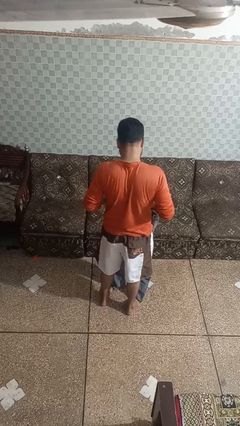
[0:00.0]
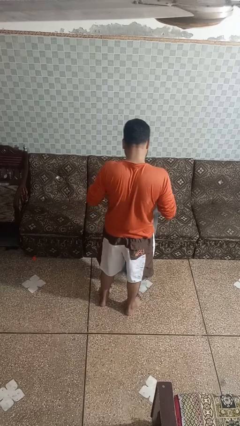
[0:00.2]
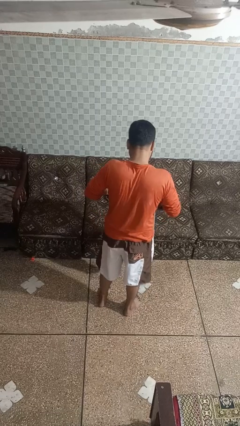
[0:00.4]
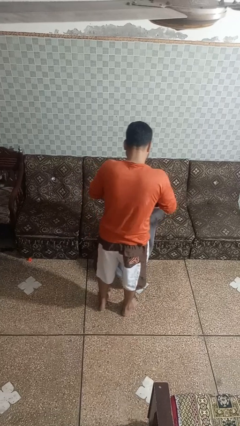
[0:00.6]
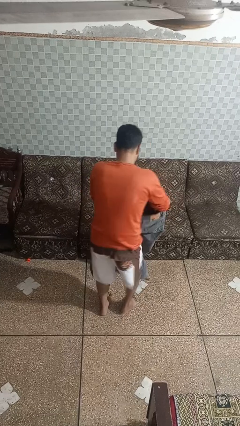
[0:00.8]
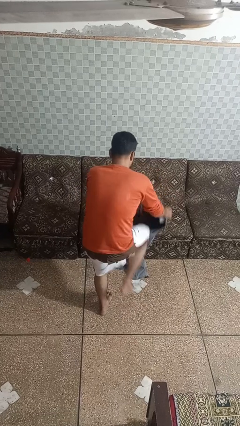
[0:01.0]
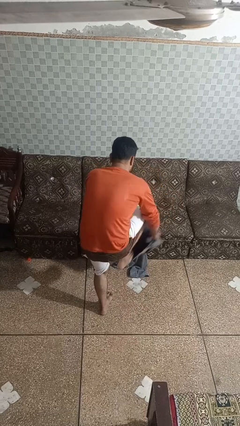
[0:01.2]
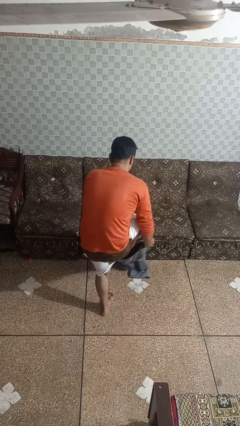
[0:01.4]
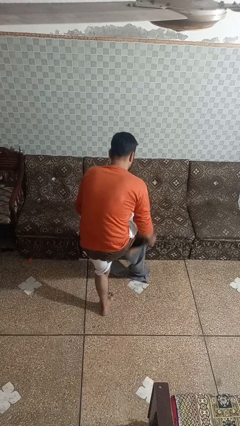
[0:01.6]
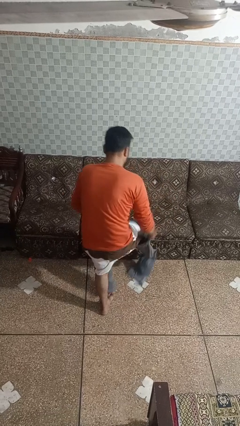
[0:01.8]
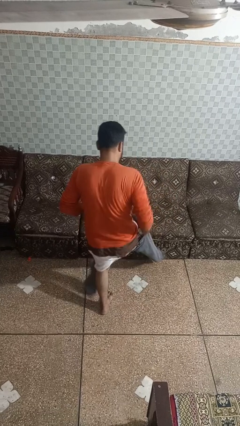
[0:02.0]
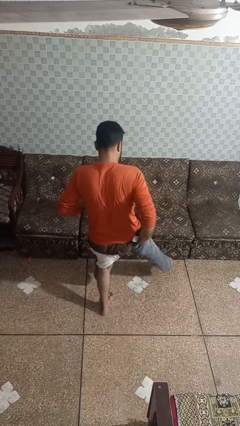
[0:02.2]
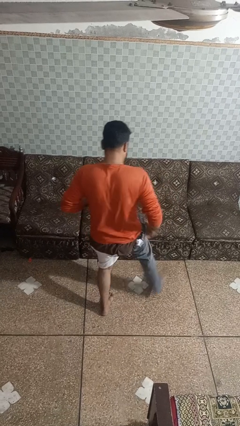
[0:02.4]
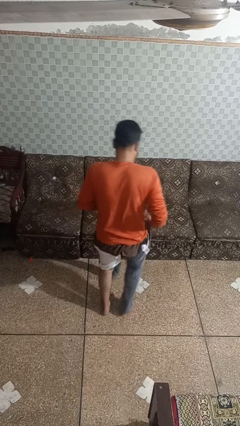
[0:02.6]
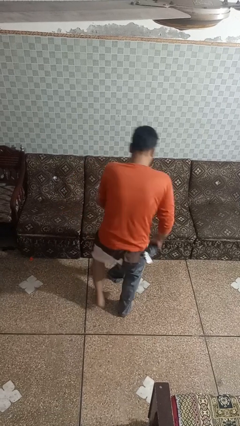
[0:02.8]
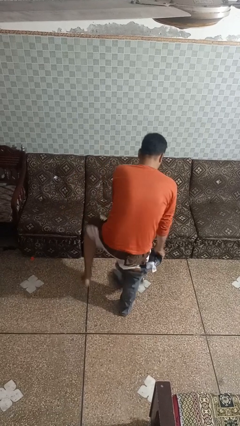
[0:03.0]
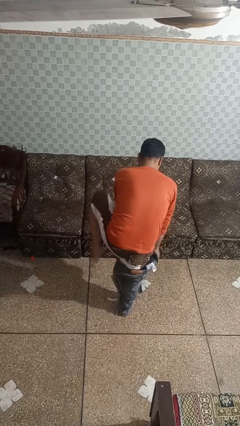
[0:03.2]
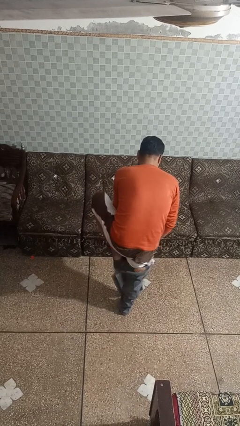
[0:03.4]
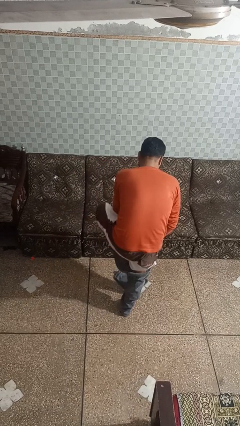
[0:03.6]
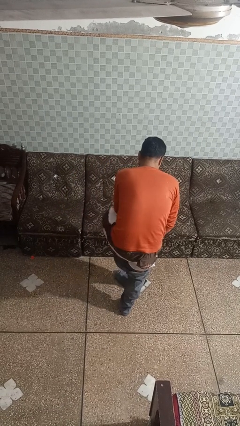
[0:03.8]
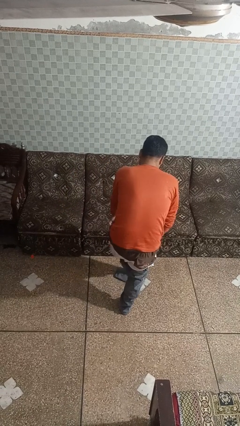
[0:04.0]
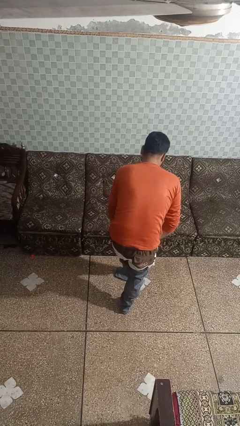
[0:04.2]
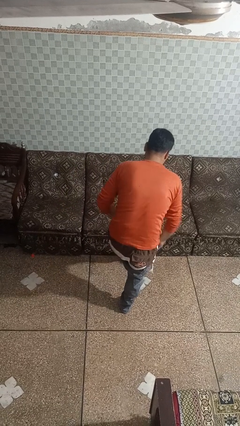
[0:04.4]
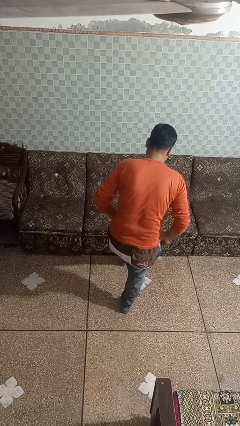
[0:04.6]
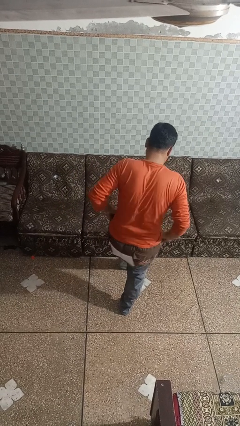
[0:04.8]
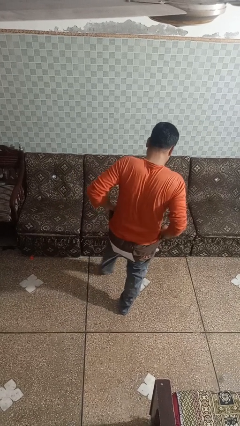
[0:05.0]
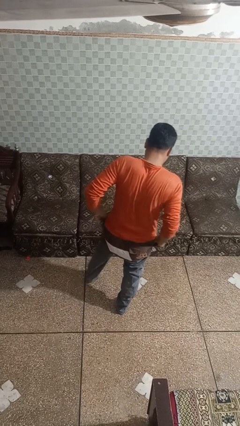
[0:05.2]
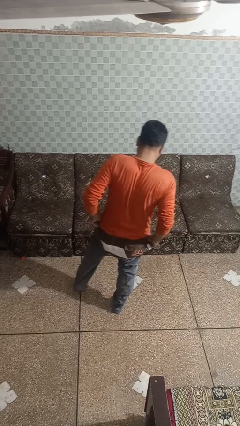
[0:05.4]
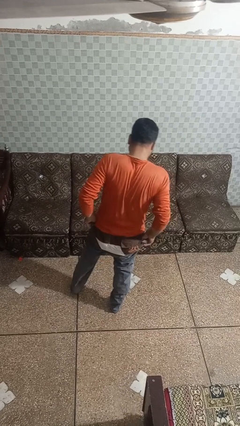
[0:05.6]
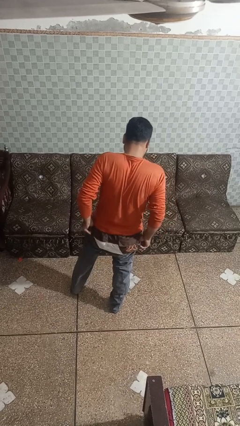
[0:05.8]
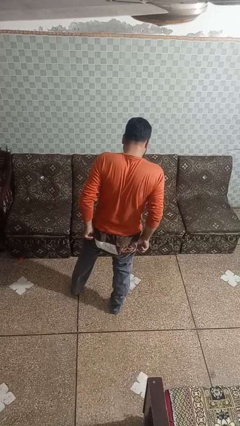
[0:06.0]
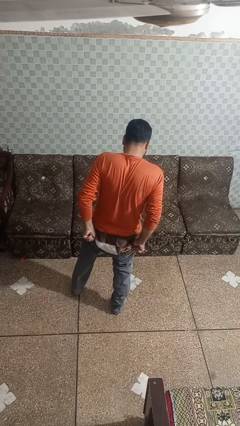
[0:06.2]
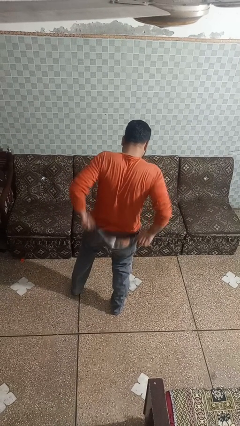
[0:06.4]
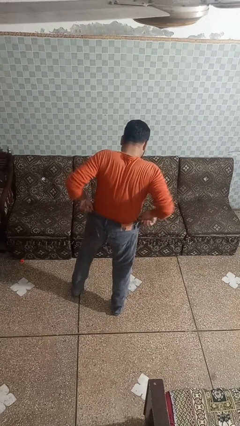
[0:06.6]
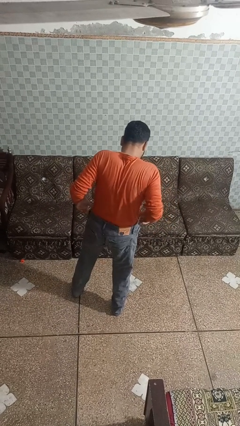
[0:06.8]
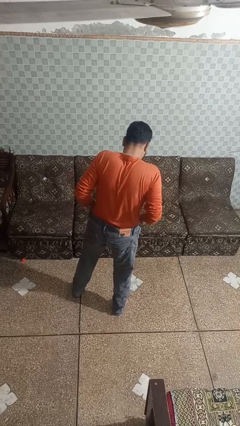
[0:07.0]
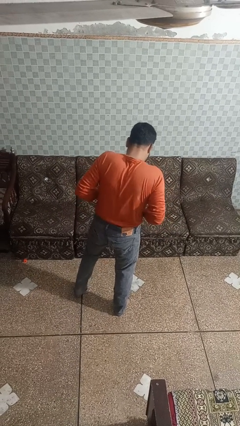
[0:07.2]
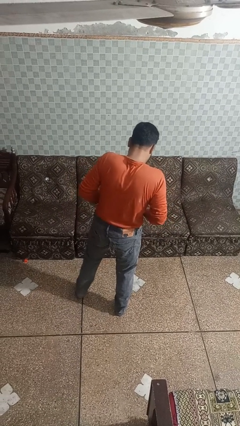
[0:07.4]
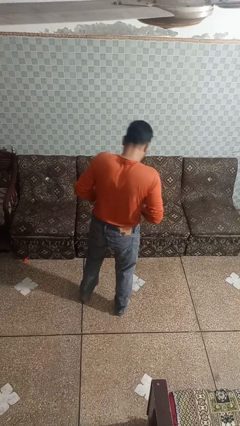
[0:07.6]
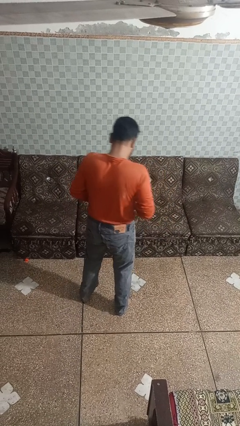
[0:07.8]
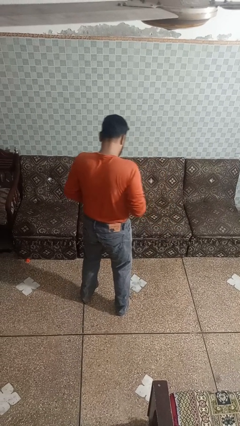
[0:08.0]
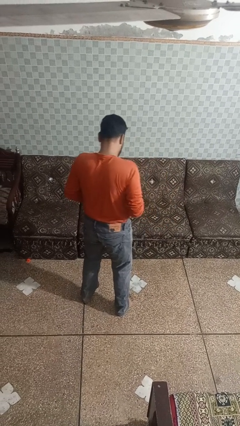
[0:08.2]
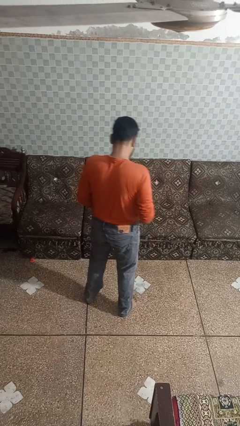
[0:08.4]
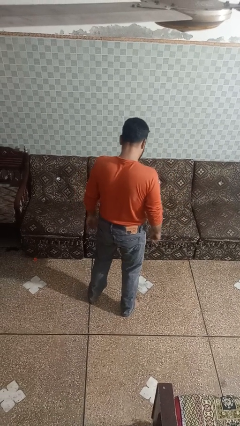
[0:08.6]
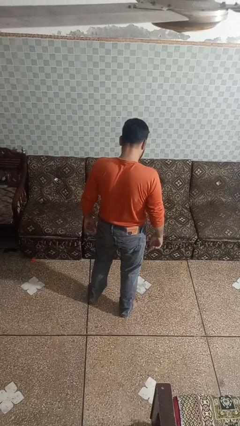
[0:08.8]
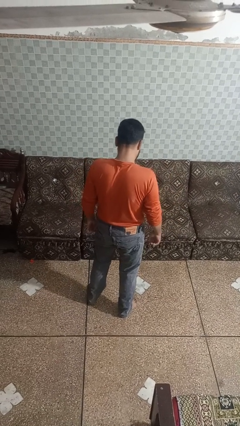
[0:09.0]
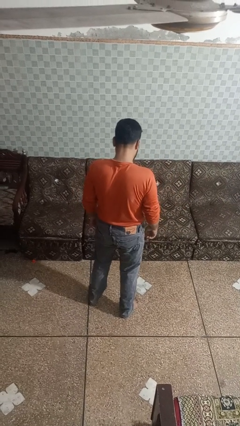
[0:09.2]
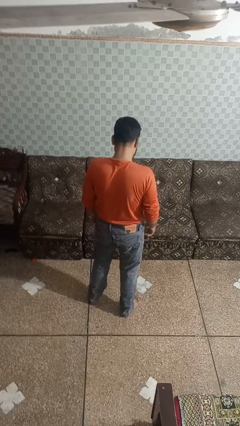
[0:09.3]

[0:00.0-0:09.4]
person puts on pants

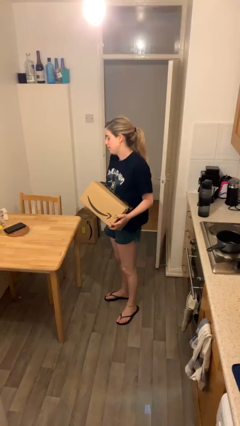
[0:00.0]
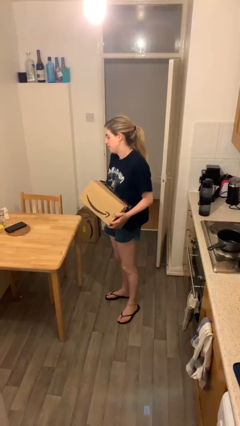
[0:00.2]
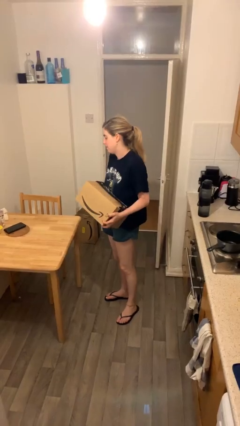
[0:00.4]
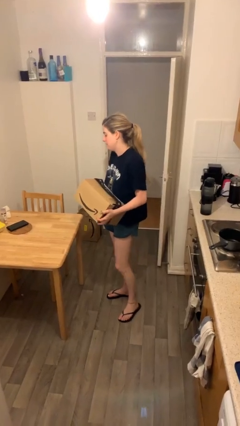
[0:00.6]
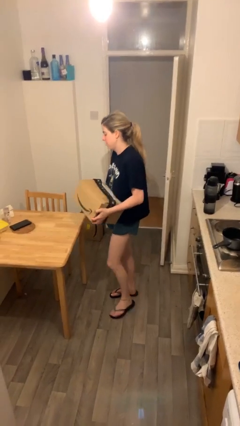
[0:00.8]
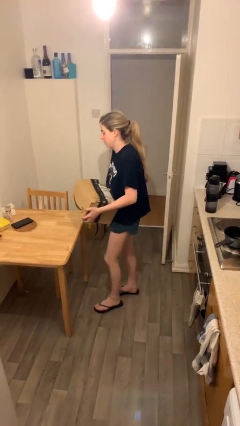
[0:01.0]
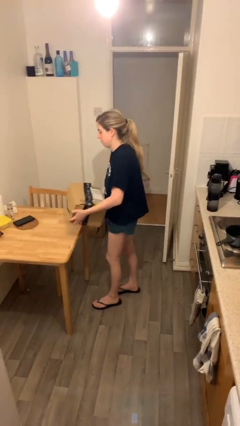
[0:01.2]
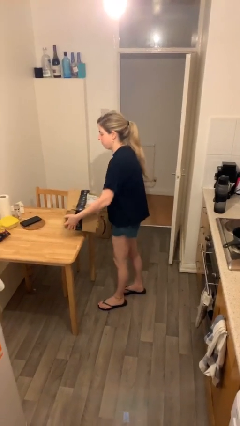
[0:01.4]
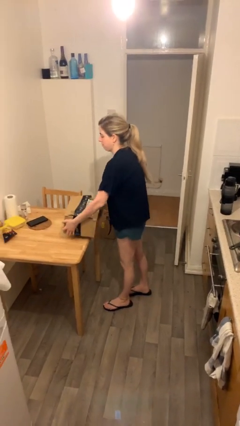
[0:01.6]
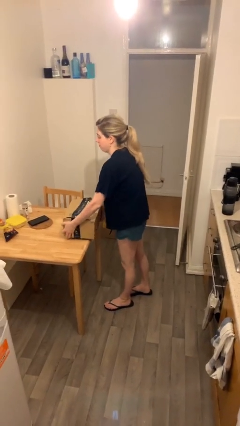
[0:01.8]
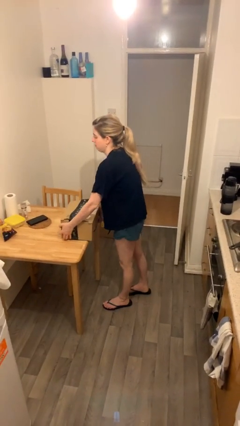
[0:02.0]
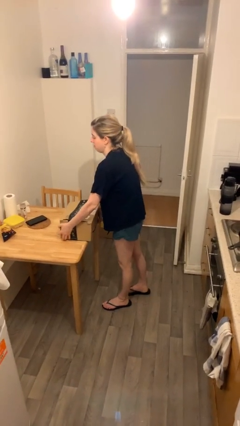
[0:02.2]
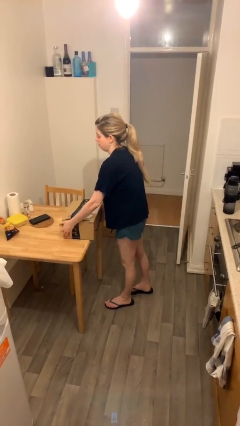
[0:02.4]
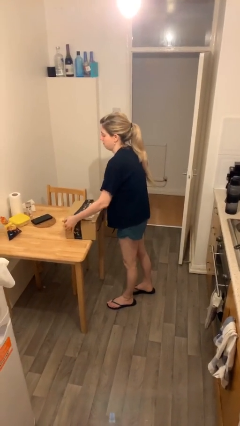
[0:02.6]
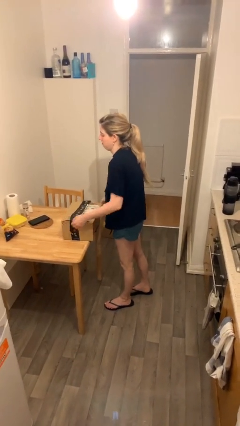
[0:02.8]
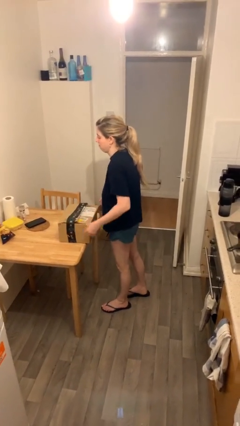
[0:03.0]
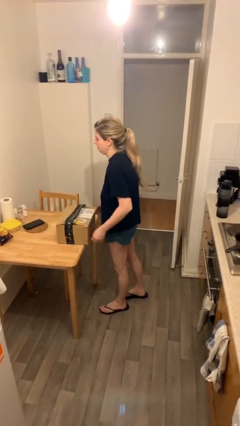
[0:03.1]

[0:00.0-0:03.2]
person puts down object on table

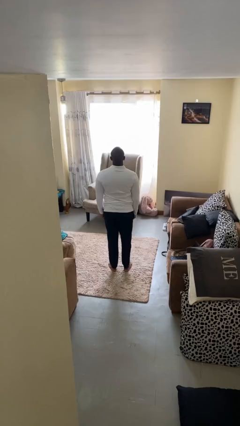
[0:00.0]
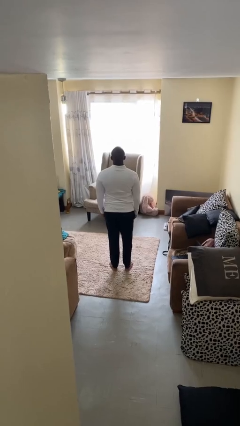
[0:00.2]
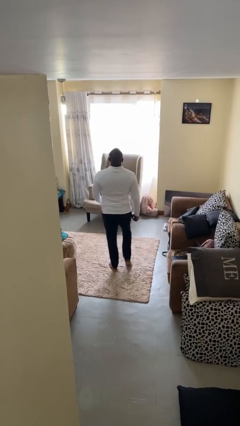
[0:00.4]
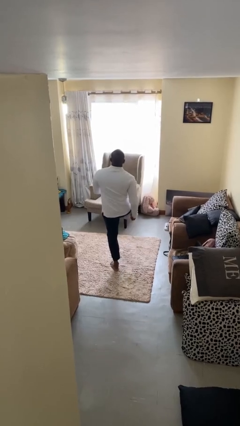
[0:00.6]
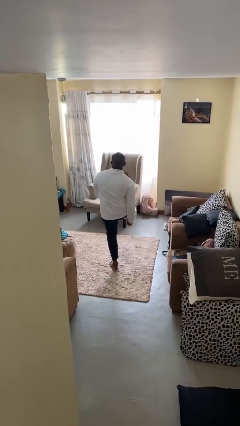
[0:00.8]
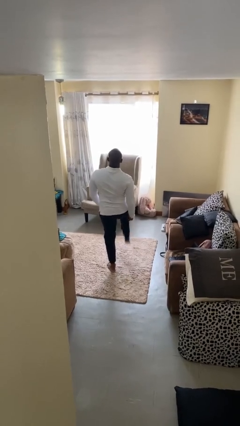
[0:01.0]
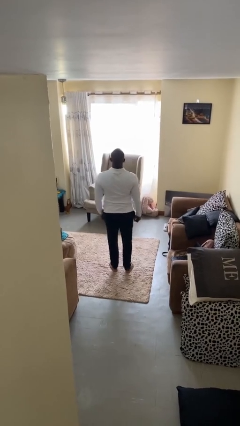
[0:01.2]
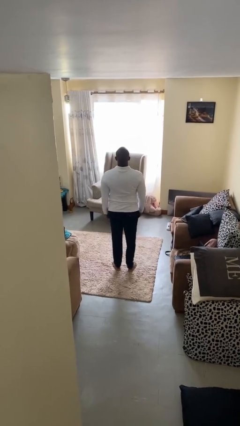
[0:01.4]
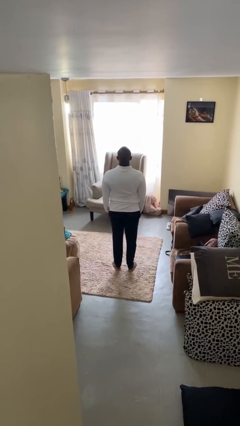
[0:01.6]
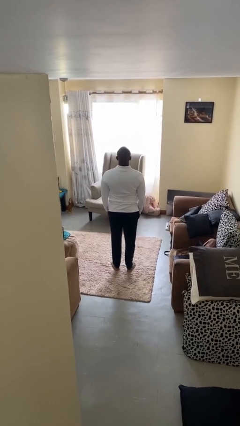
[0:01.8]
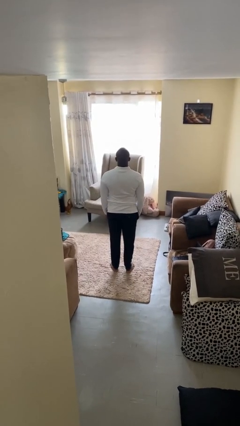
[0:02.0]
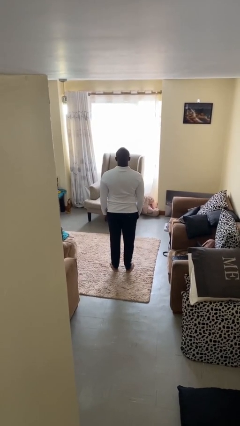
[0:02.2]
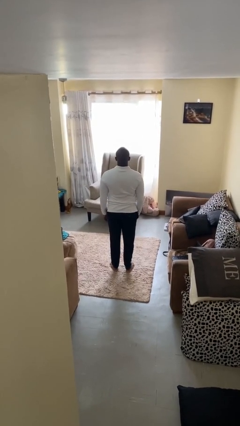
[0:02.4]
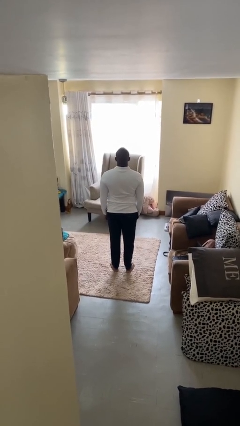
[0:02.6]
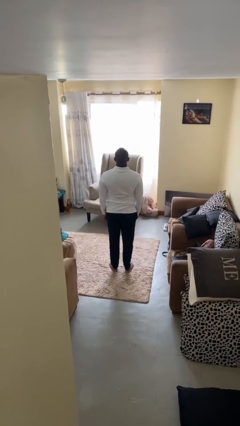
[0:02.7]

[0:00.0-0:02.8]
person karate kicks

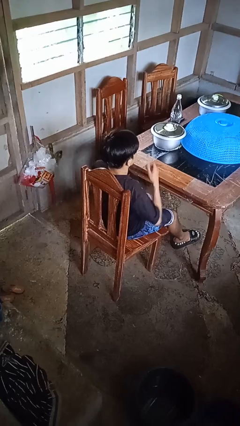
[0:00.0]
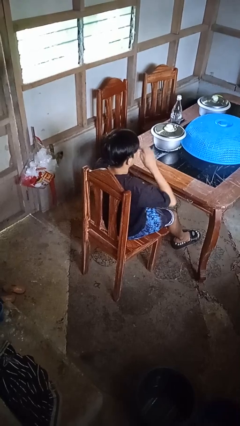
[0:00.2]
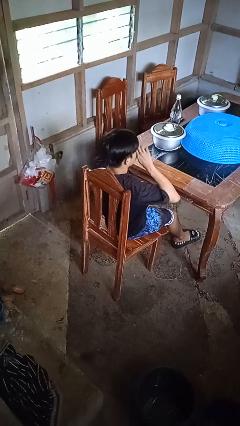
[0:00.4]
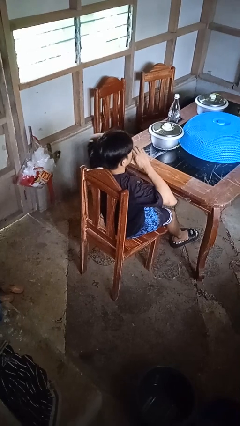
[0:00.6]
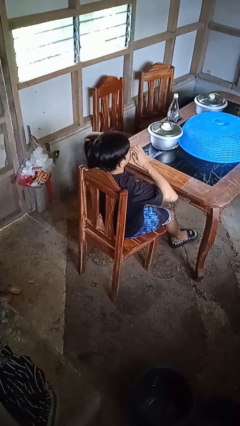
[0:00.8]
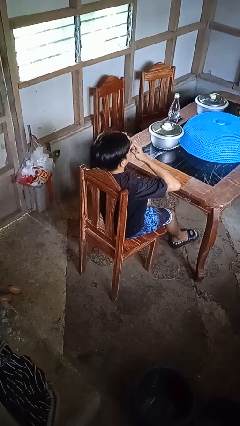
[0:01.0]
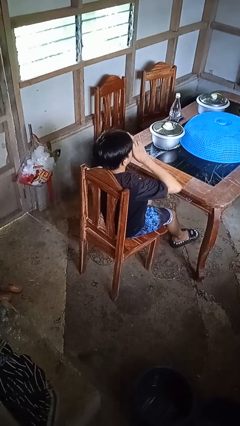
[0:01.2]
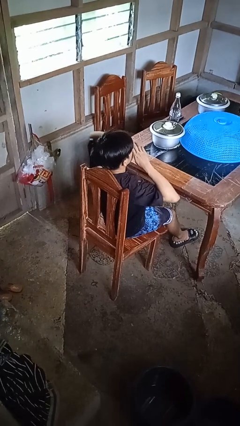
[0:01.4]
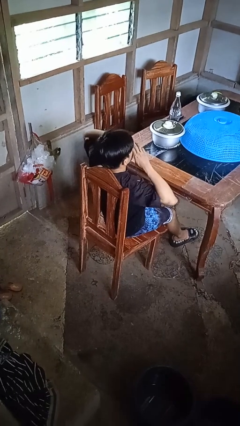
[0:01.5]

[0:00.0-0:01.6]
person rubs eyes

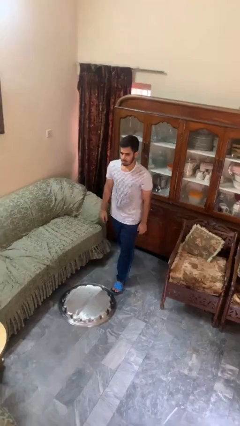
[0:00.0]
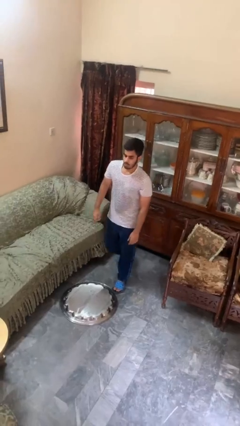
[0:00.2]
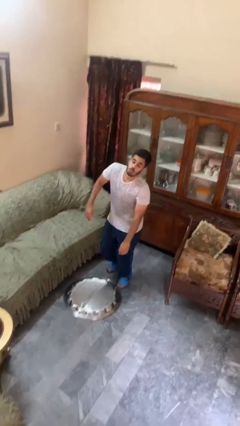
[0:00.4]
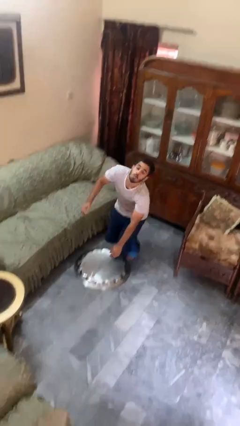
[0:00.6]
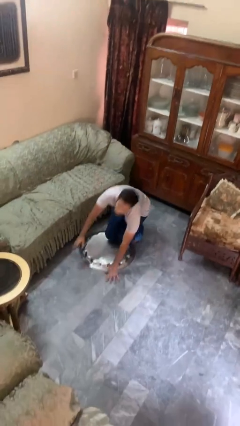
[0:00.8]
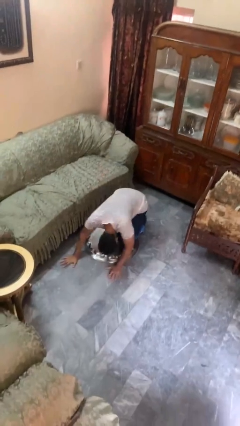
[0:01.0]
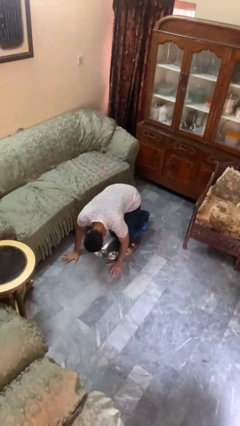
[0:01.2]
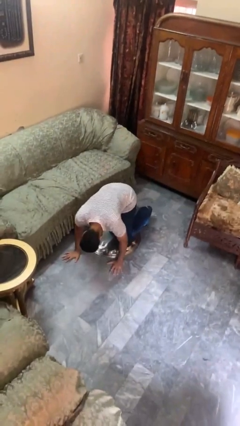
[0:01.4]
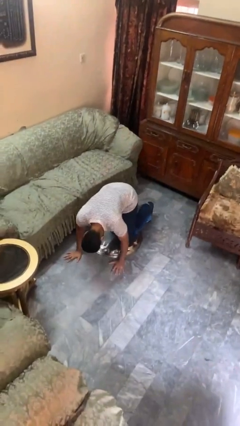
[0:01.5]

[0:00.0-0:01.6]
person trips on object on floor
